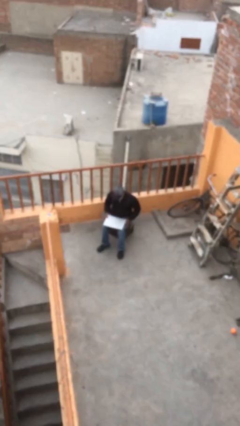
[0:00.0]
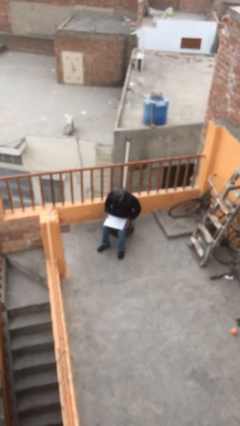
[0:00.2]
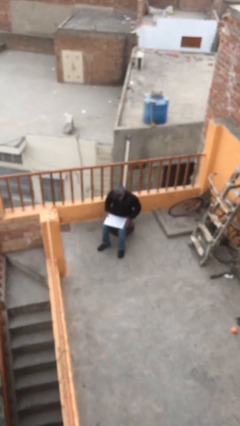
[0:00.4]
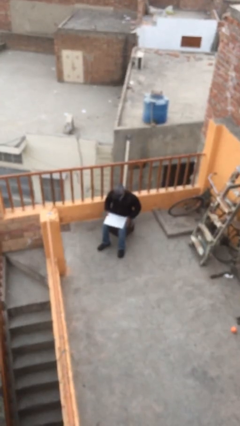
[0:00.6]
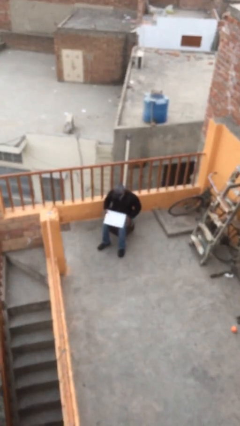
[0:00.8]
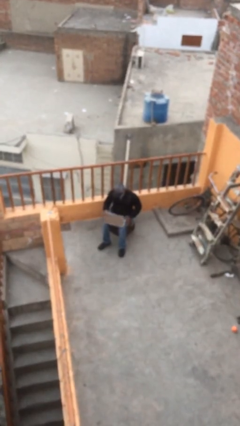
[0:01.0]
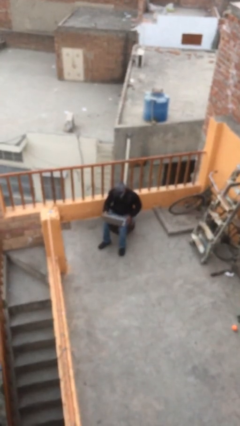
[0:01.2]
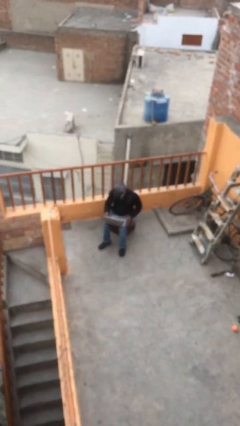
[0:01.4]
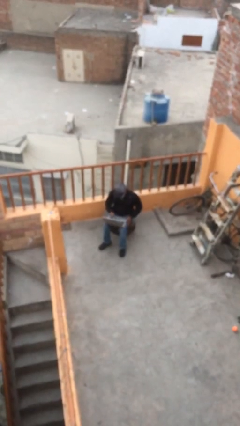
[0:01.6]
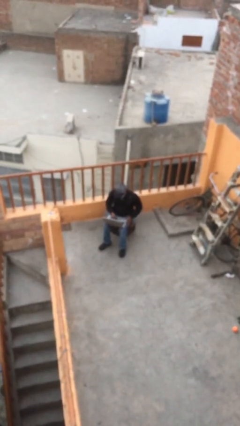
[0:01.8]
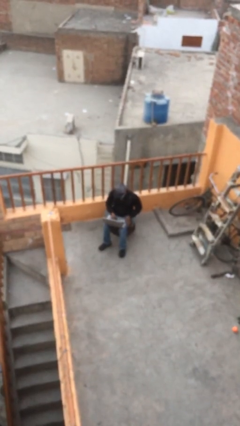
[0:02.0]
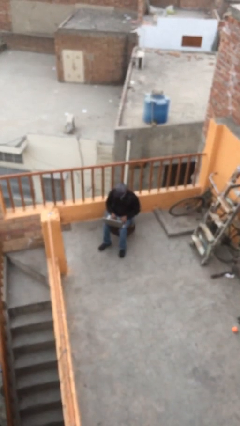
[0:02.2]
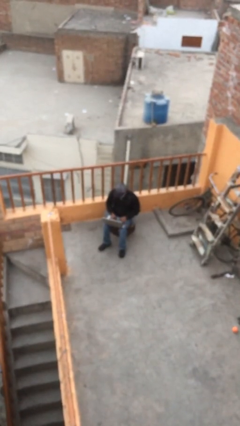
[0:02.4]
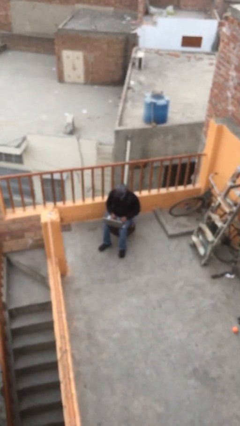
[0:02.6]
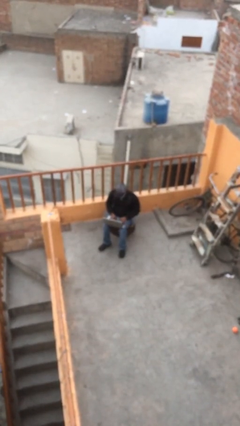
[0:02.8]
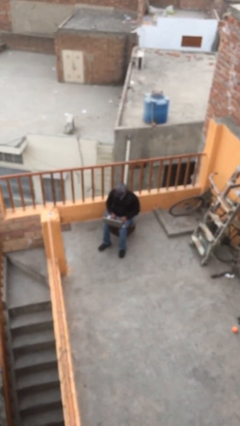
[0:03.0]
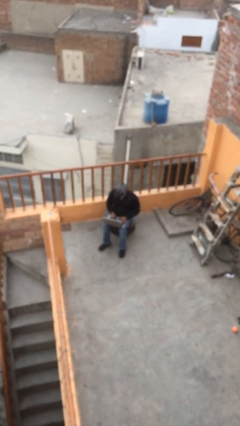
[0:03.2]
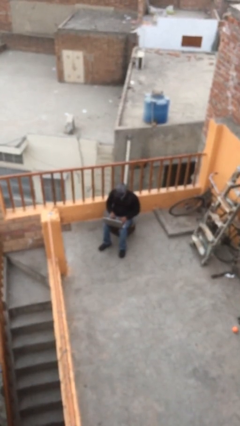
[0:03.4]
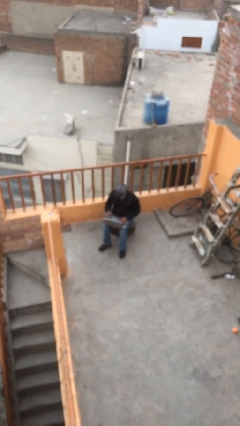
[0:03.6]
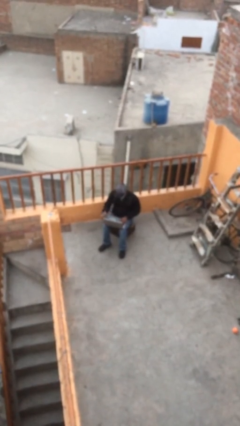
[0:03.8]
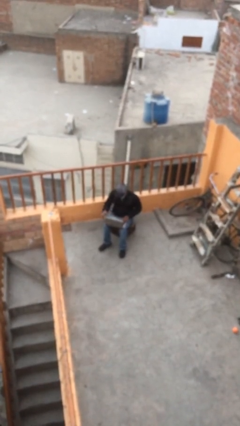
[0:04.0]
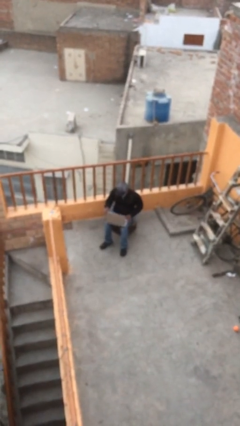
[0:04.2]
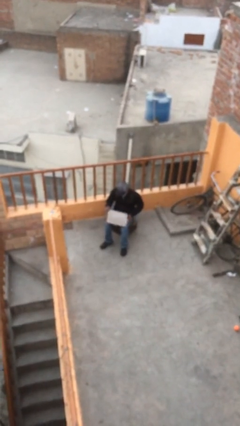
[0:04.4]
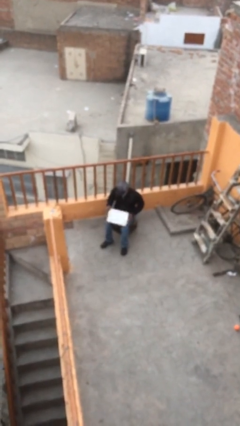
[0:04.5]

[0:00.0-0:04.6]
person interacts with laptop

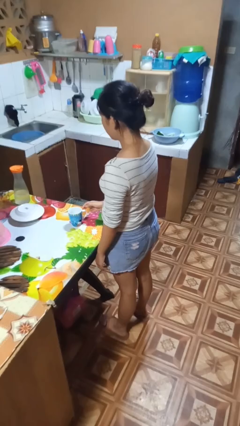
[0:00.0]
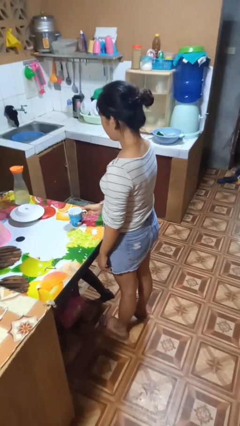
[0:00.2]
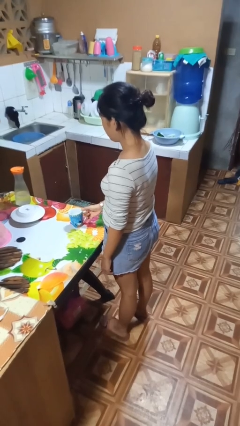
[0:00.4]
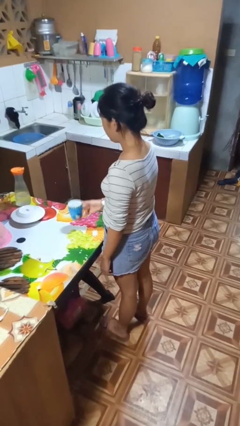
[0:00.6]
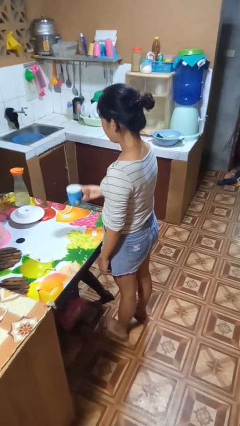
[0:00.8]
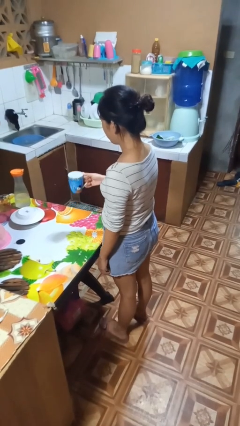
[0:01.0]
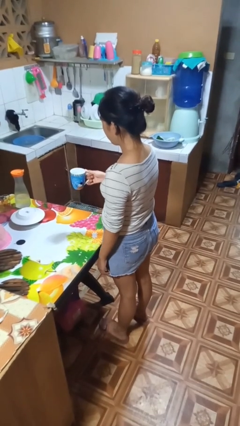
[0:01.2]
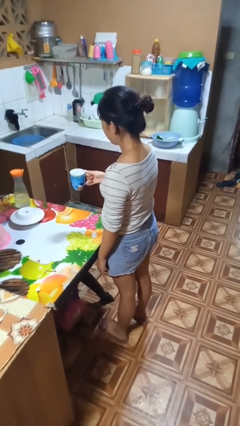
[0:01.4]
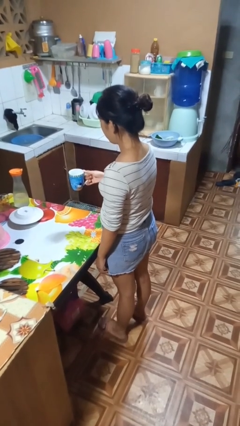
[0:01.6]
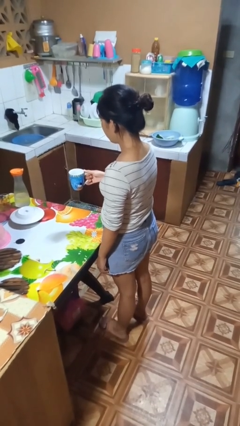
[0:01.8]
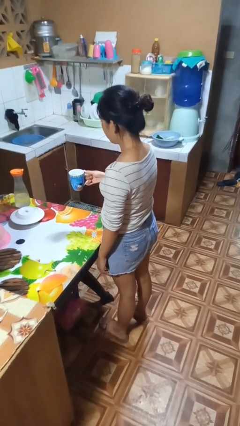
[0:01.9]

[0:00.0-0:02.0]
person picks up object from table

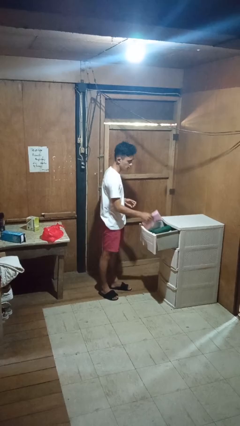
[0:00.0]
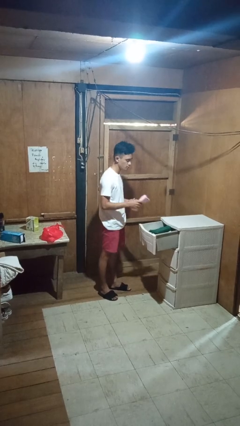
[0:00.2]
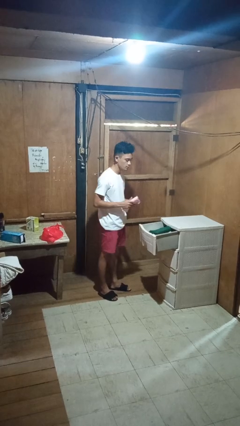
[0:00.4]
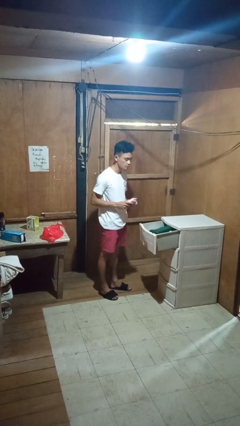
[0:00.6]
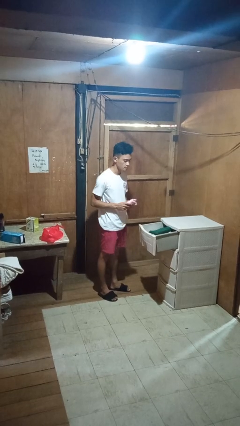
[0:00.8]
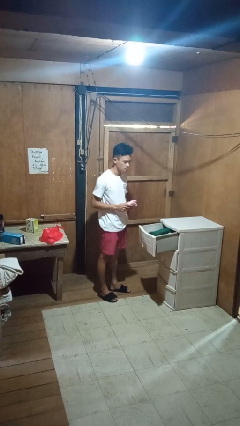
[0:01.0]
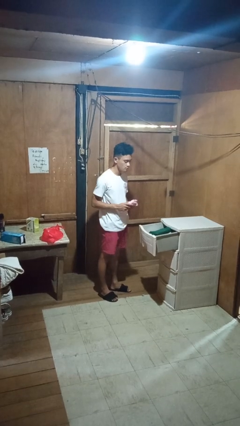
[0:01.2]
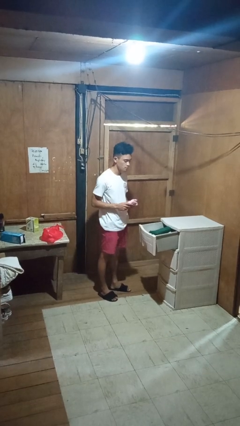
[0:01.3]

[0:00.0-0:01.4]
person takes clothes from dresser

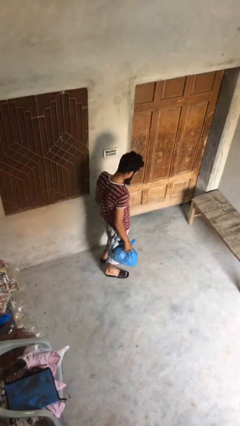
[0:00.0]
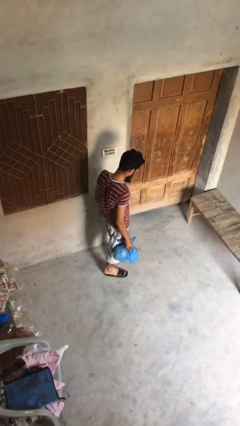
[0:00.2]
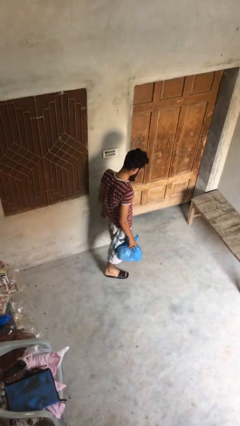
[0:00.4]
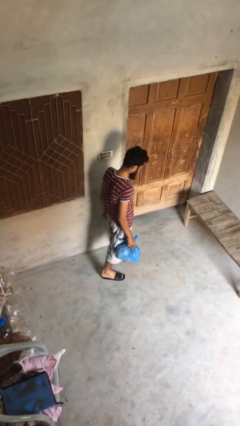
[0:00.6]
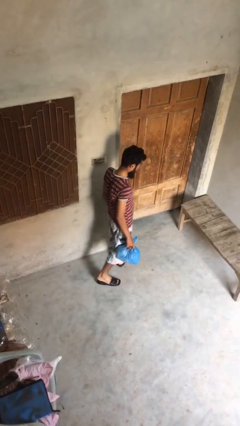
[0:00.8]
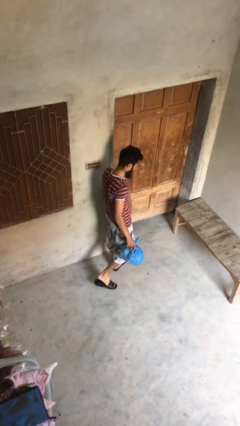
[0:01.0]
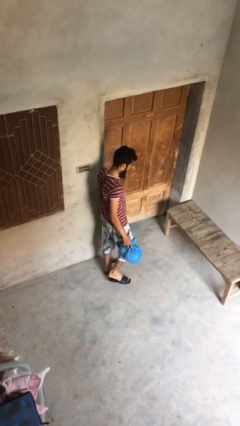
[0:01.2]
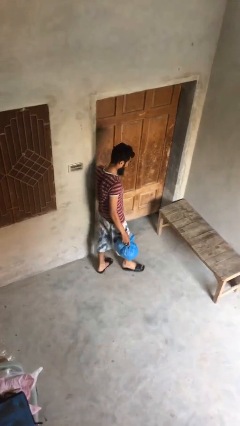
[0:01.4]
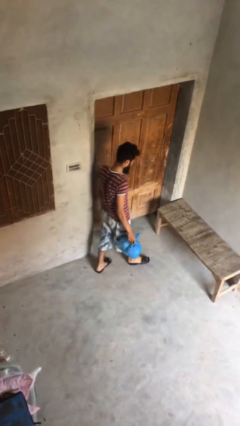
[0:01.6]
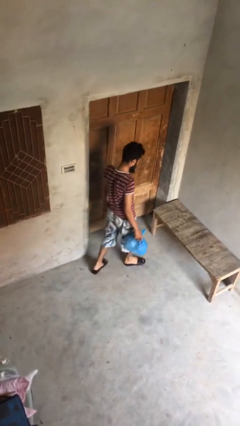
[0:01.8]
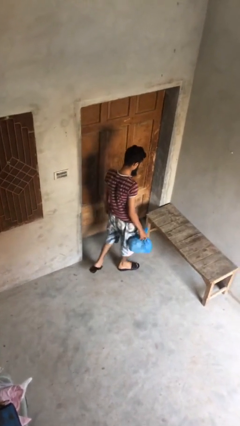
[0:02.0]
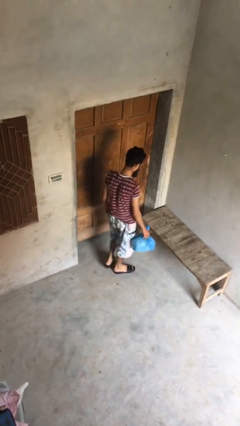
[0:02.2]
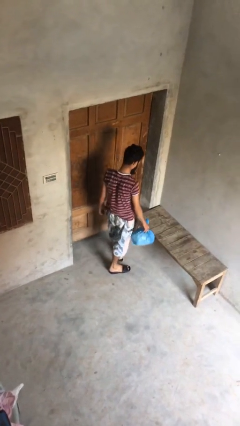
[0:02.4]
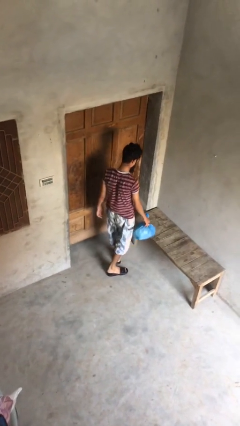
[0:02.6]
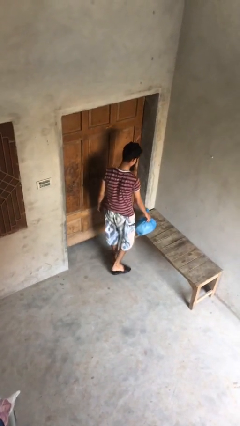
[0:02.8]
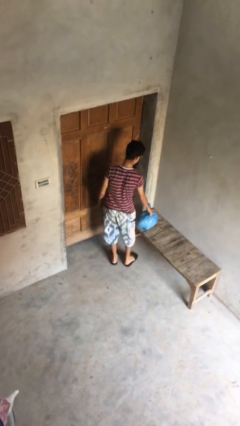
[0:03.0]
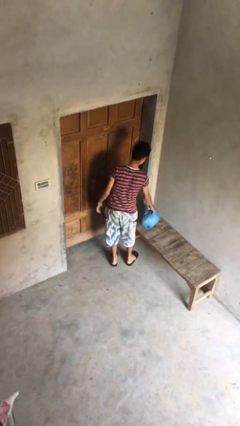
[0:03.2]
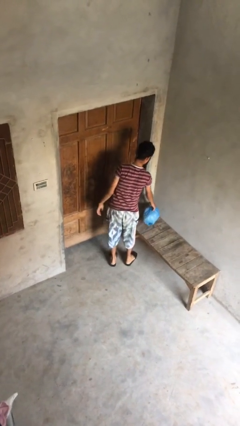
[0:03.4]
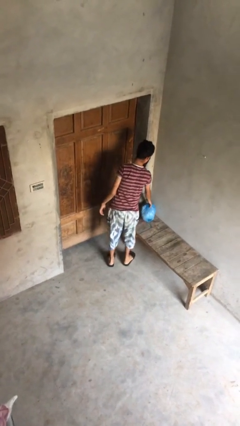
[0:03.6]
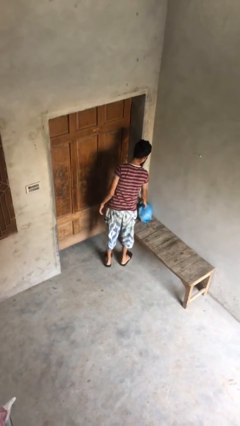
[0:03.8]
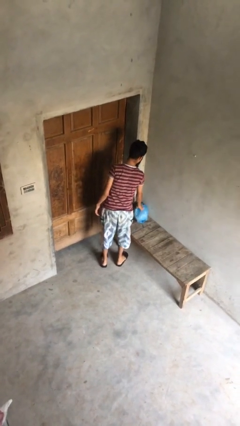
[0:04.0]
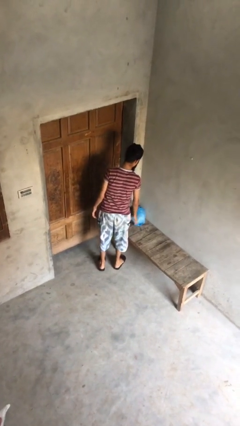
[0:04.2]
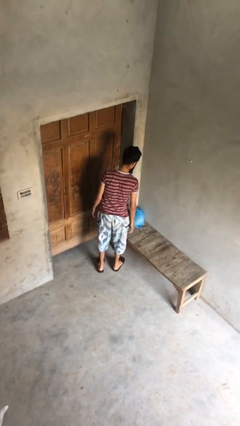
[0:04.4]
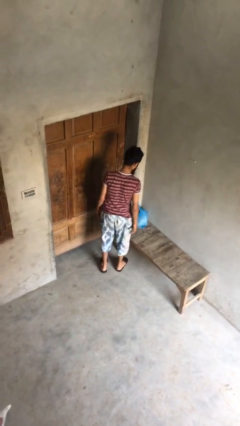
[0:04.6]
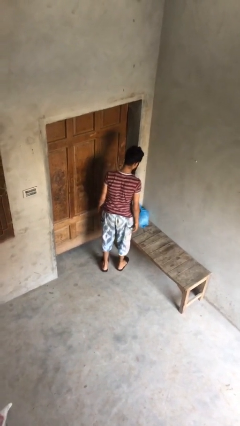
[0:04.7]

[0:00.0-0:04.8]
person puts down object on table

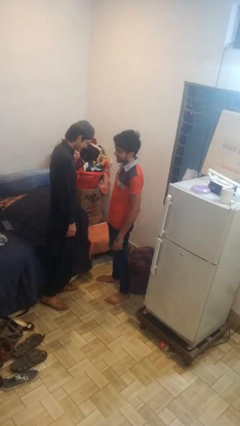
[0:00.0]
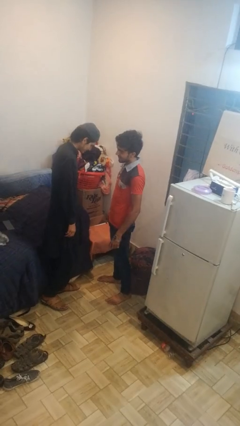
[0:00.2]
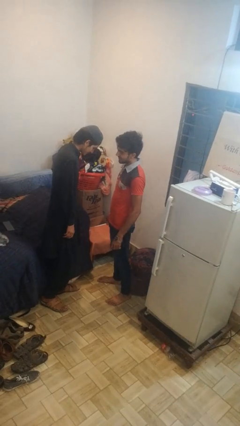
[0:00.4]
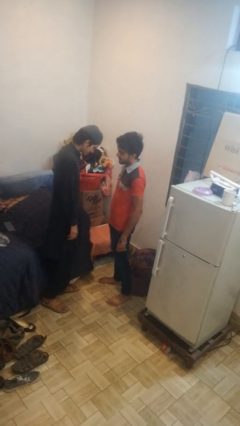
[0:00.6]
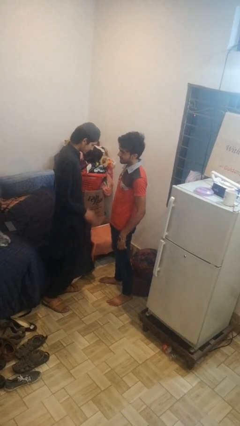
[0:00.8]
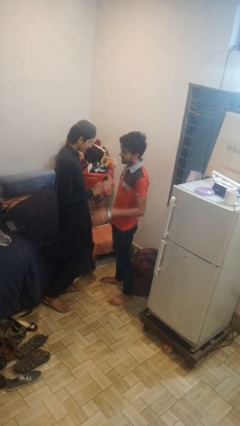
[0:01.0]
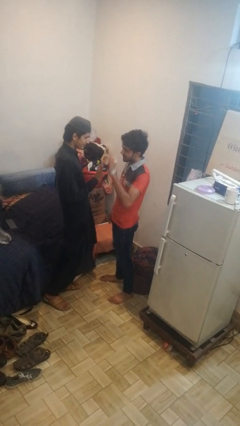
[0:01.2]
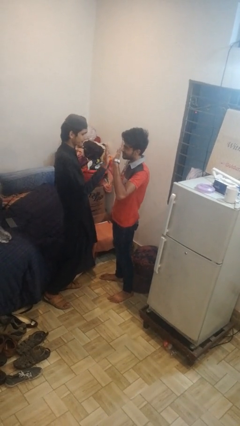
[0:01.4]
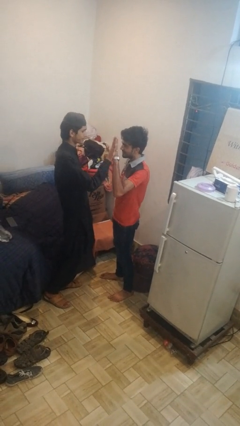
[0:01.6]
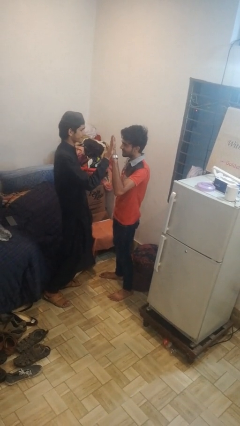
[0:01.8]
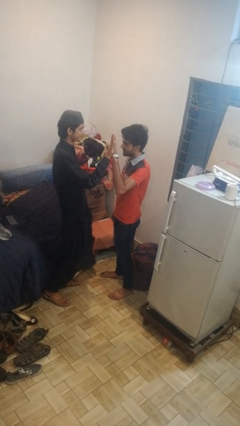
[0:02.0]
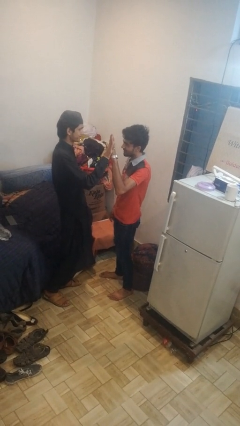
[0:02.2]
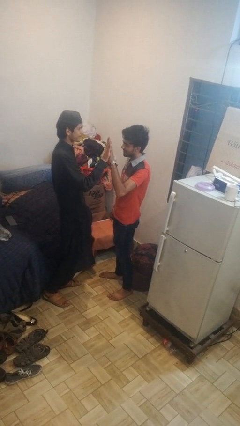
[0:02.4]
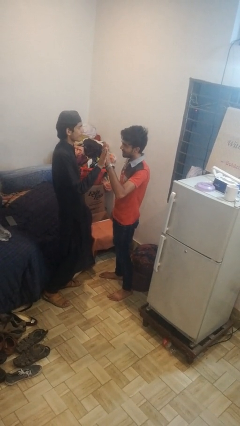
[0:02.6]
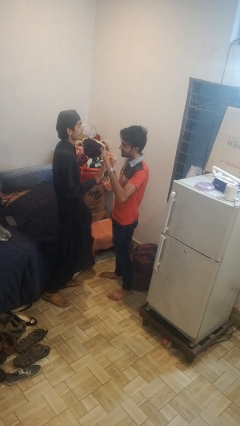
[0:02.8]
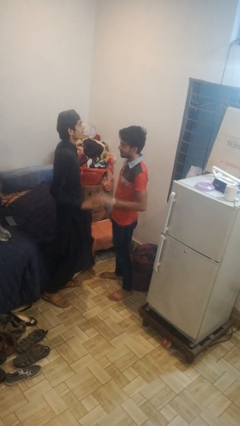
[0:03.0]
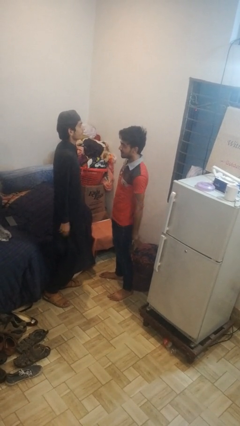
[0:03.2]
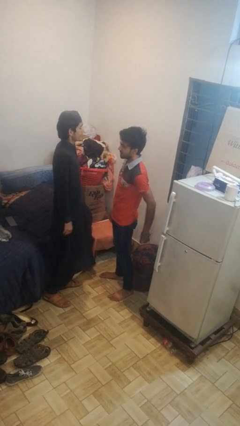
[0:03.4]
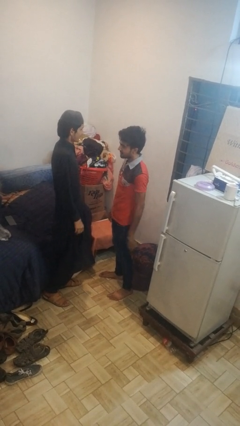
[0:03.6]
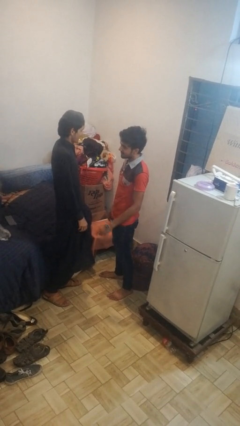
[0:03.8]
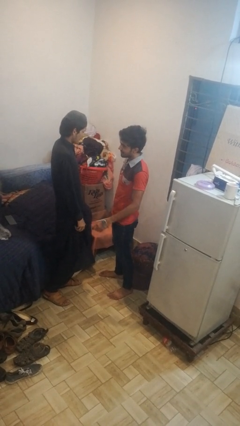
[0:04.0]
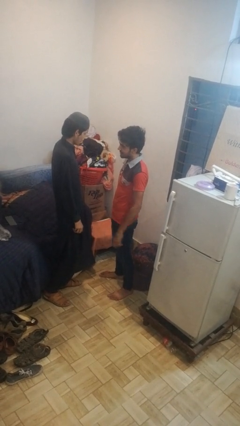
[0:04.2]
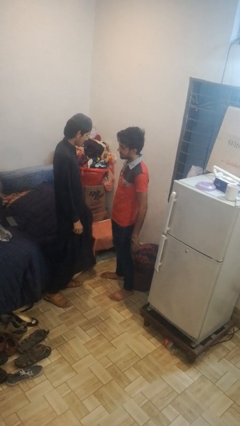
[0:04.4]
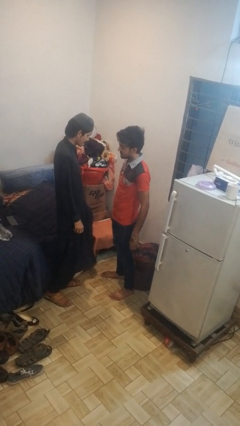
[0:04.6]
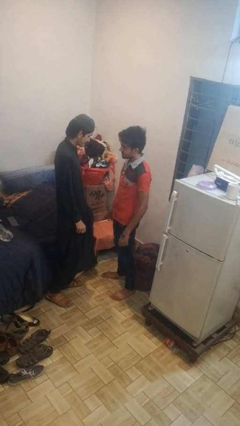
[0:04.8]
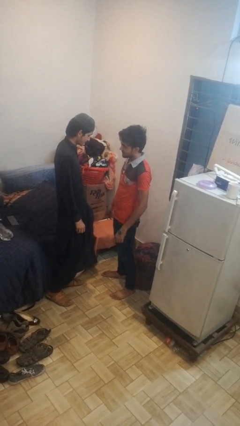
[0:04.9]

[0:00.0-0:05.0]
person highfives hand
